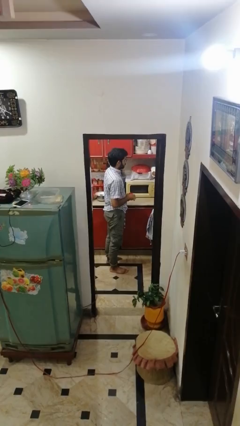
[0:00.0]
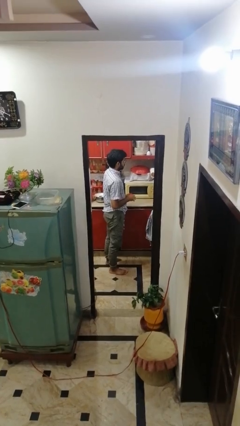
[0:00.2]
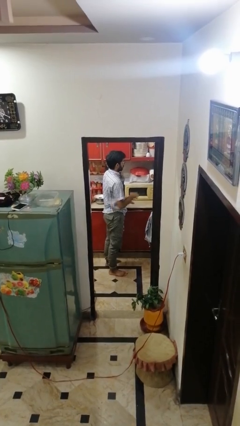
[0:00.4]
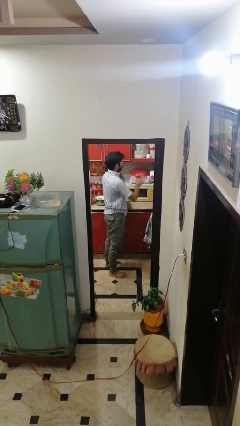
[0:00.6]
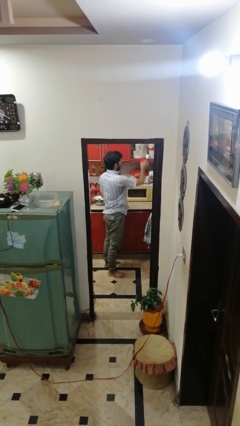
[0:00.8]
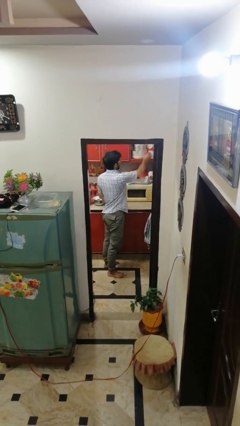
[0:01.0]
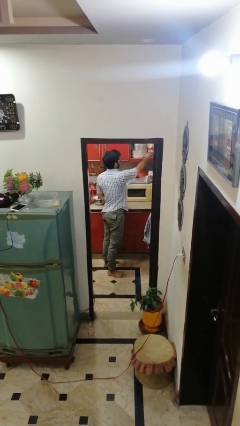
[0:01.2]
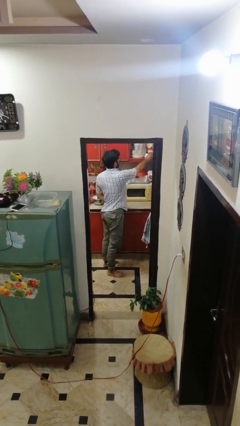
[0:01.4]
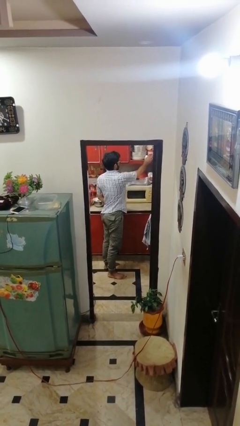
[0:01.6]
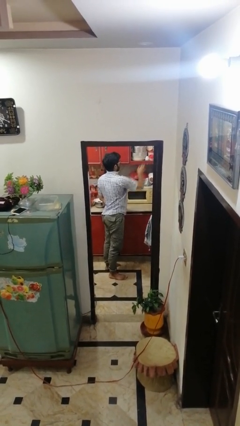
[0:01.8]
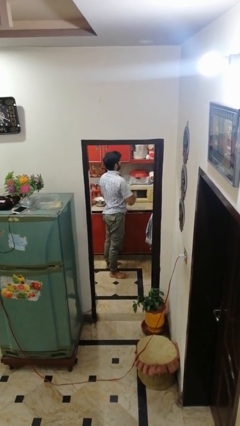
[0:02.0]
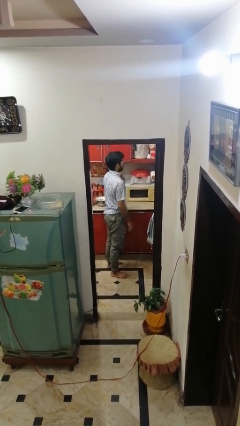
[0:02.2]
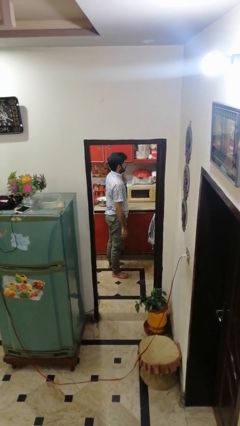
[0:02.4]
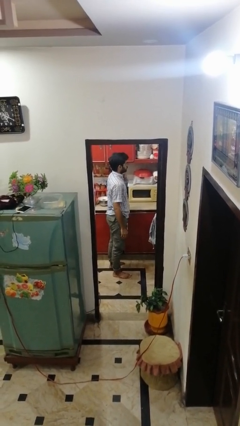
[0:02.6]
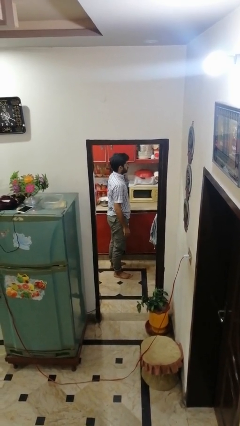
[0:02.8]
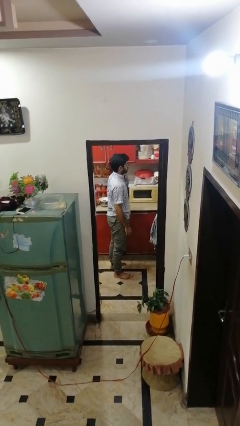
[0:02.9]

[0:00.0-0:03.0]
person puts down object into cabinet

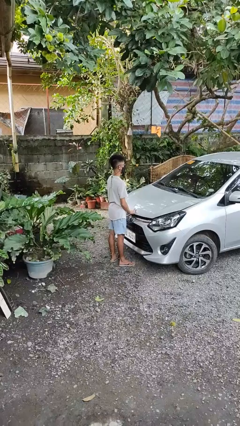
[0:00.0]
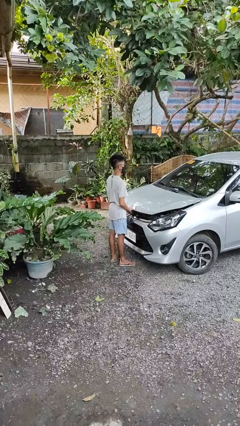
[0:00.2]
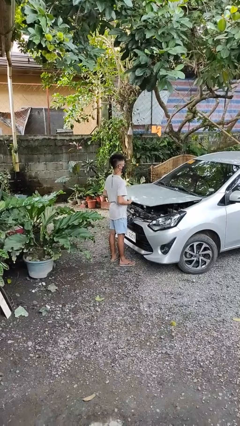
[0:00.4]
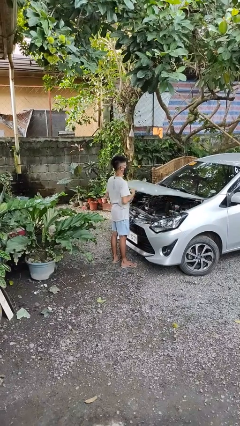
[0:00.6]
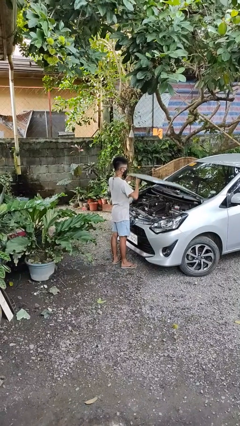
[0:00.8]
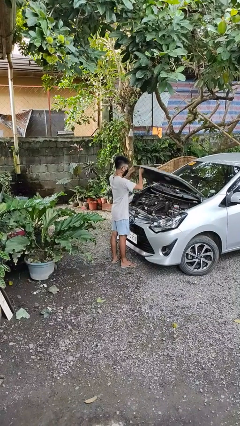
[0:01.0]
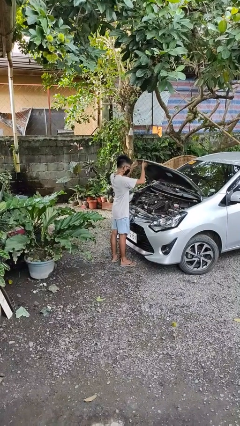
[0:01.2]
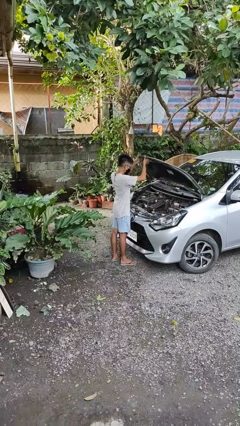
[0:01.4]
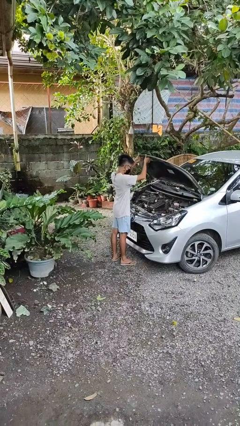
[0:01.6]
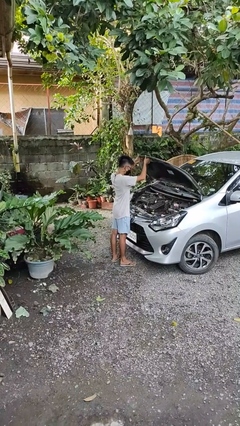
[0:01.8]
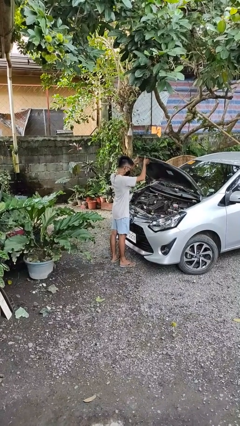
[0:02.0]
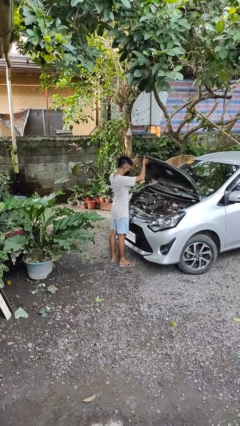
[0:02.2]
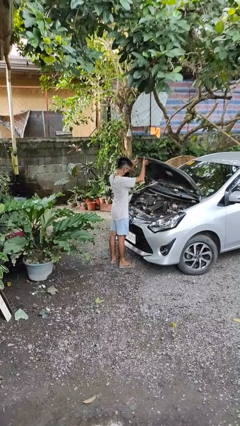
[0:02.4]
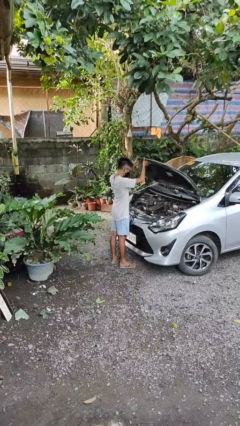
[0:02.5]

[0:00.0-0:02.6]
person opens car hood

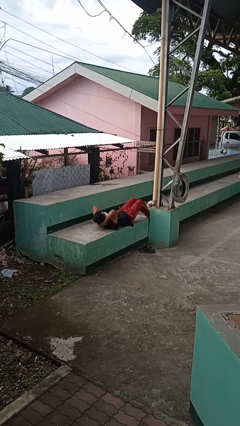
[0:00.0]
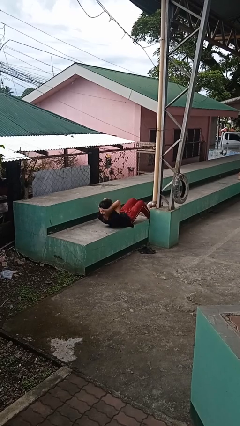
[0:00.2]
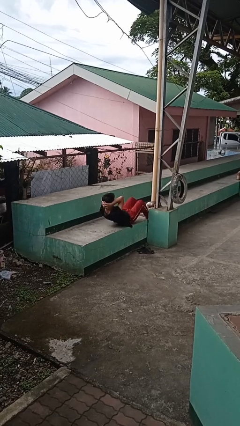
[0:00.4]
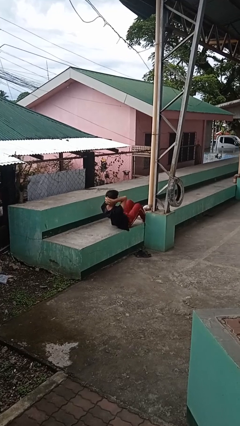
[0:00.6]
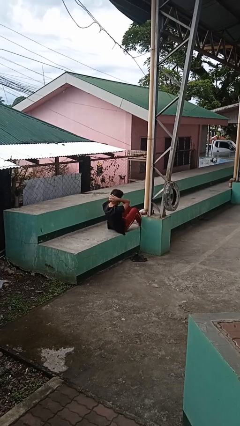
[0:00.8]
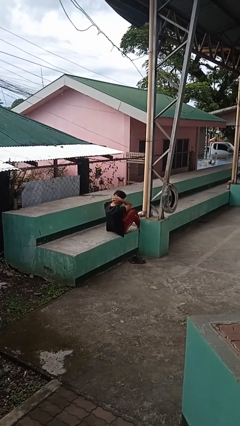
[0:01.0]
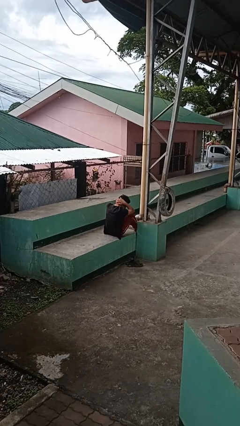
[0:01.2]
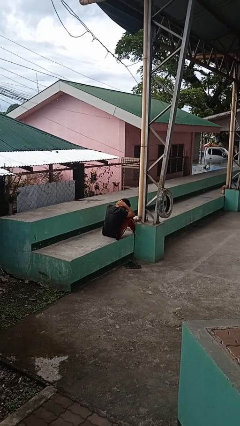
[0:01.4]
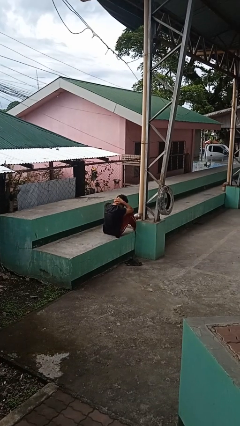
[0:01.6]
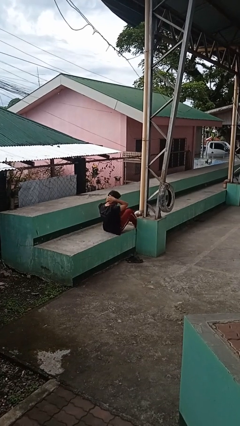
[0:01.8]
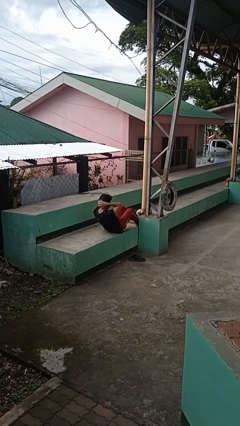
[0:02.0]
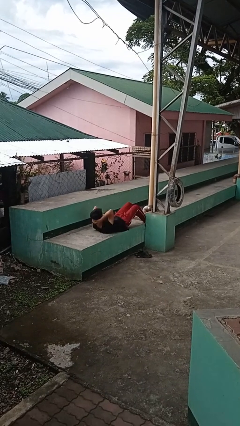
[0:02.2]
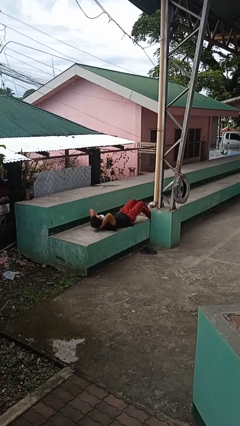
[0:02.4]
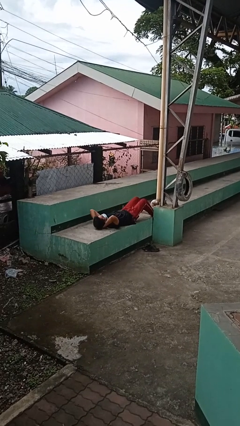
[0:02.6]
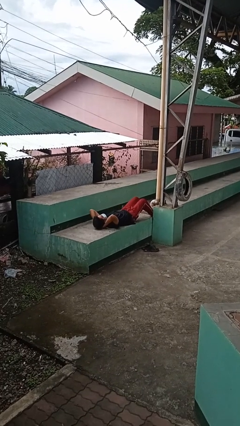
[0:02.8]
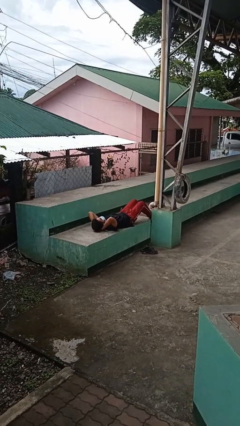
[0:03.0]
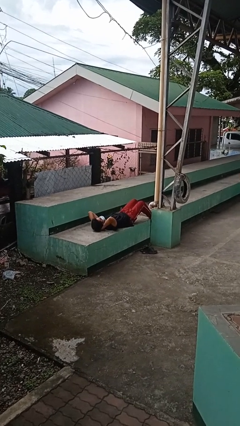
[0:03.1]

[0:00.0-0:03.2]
person exercises with situp

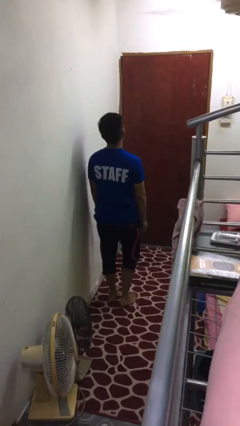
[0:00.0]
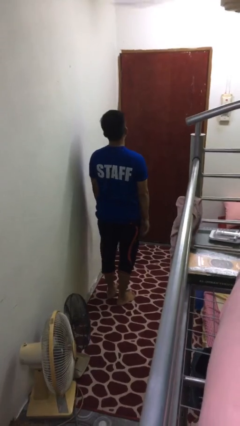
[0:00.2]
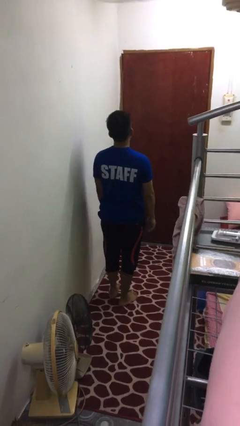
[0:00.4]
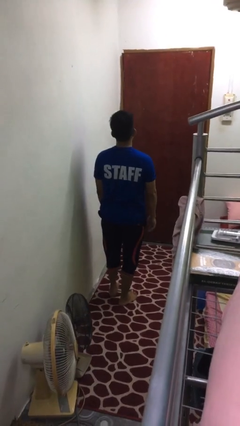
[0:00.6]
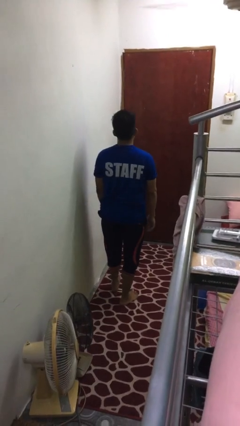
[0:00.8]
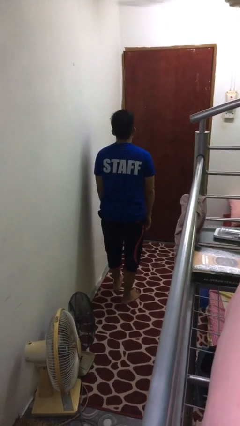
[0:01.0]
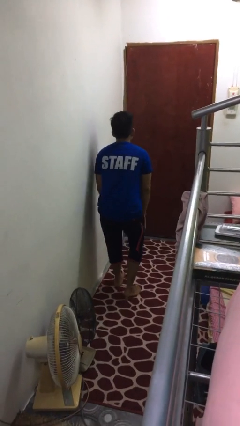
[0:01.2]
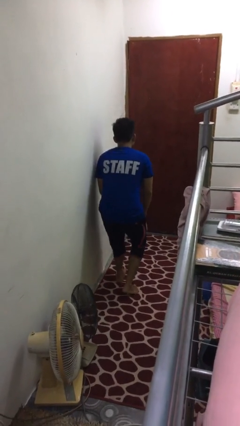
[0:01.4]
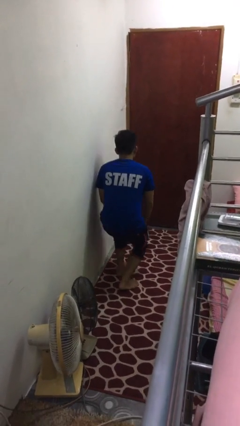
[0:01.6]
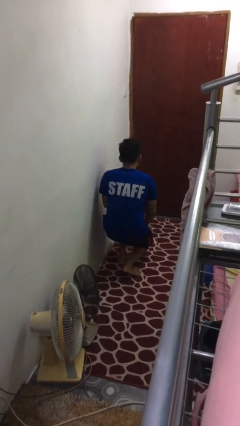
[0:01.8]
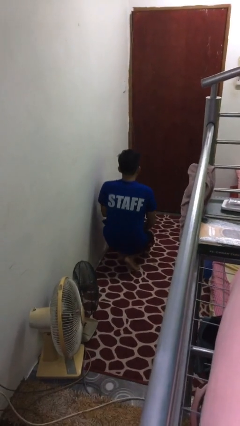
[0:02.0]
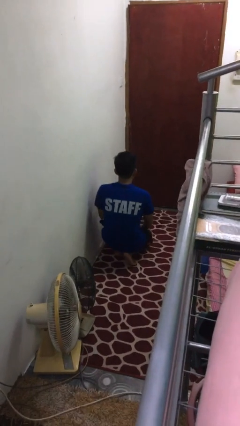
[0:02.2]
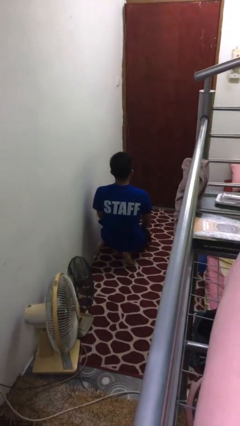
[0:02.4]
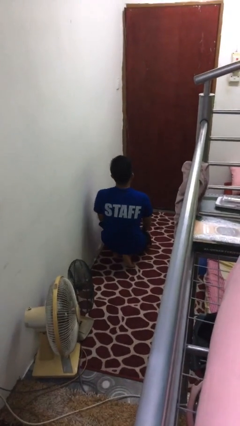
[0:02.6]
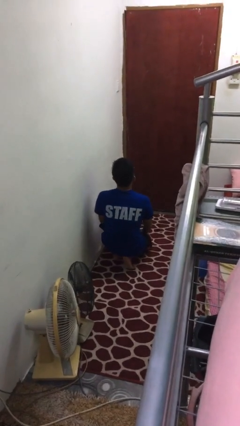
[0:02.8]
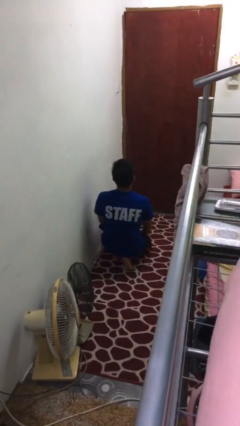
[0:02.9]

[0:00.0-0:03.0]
person kneels

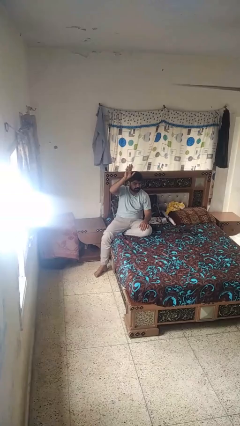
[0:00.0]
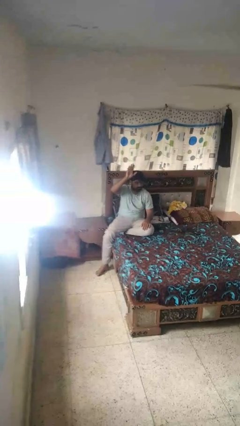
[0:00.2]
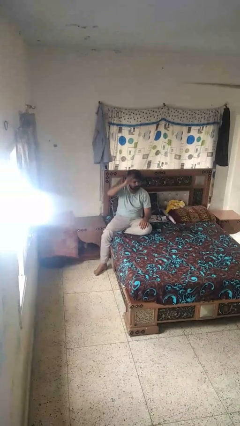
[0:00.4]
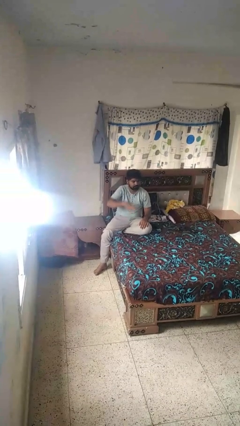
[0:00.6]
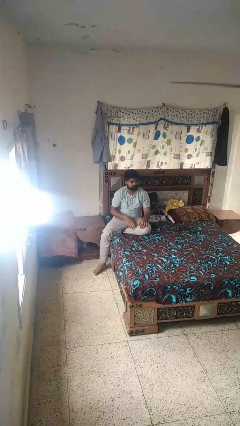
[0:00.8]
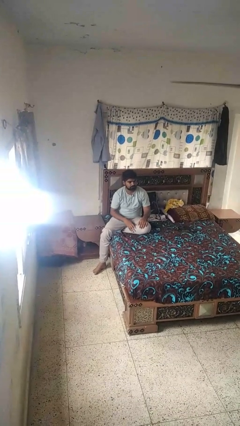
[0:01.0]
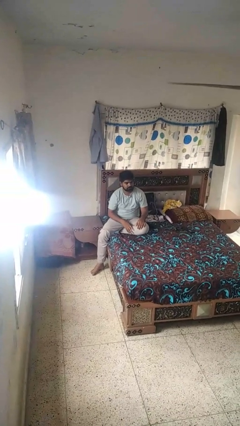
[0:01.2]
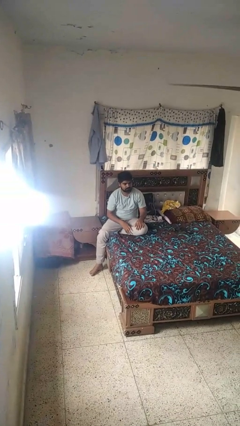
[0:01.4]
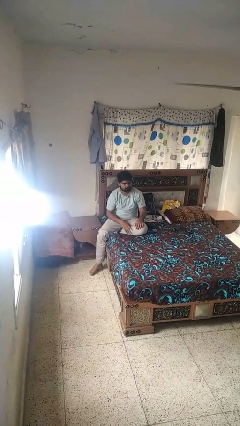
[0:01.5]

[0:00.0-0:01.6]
person gestures lower hand

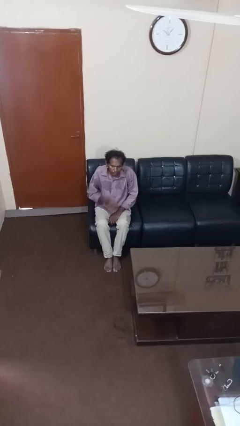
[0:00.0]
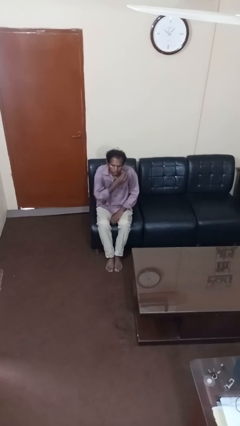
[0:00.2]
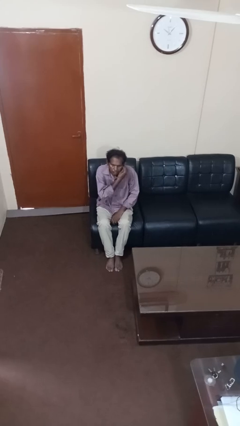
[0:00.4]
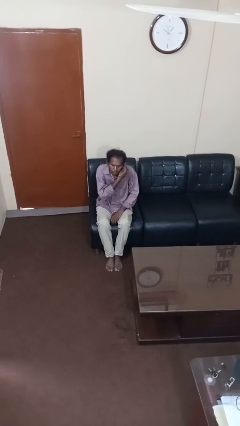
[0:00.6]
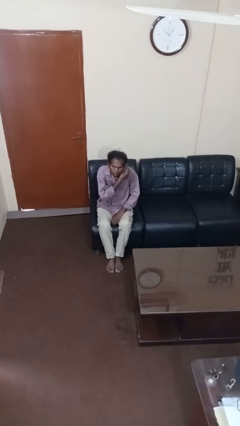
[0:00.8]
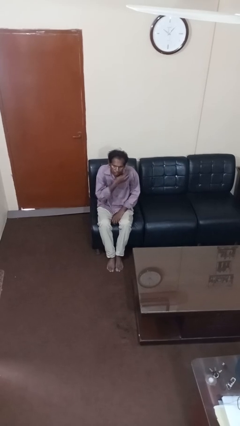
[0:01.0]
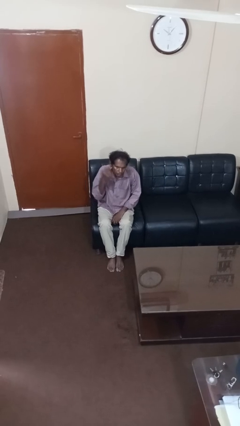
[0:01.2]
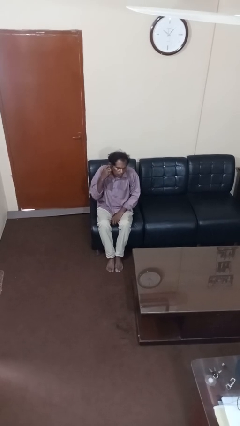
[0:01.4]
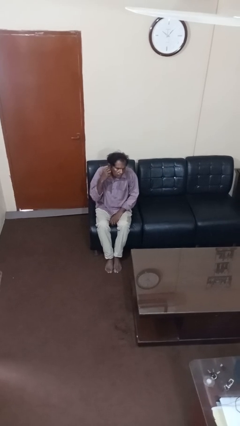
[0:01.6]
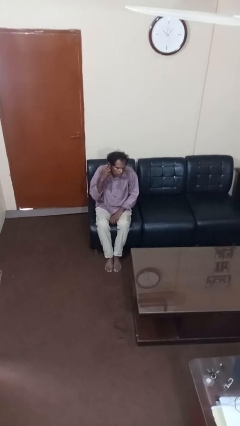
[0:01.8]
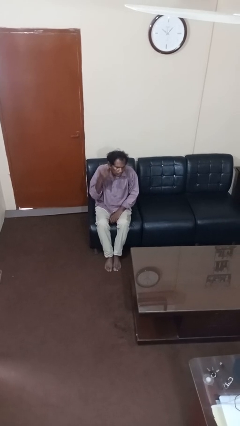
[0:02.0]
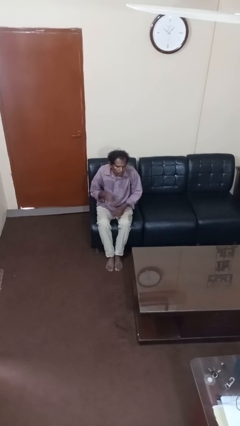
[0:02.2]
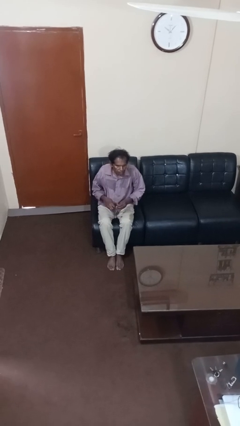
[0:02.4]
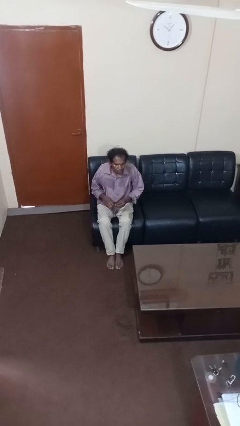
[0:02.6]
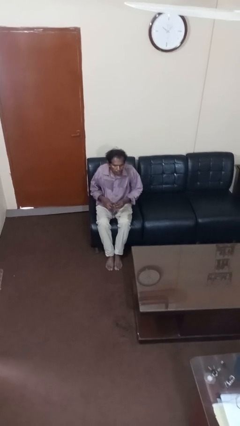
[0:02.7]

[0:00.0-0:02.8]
person takes off earrings

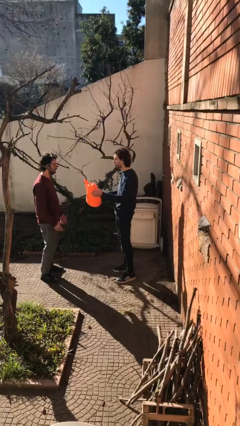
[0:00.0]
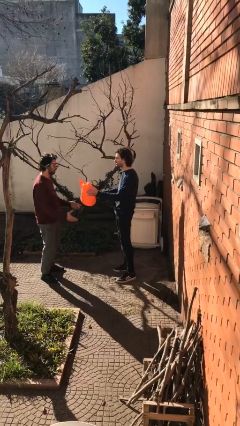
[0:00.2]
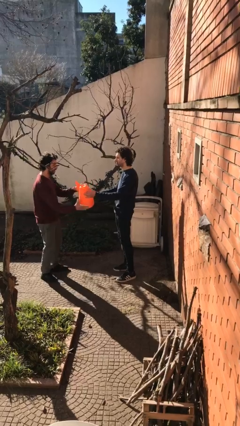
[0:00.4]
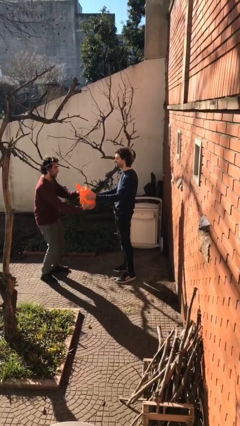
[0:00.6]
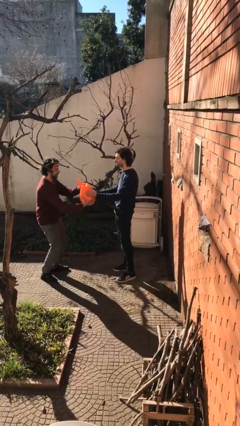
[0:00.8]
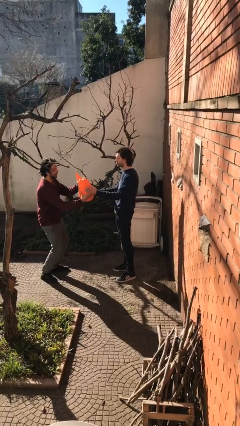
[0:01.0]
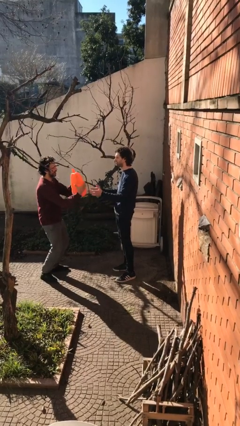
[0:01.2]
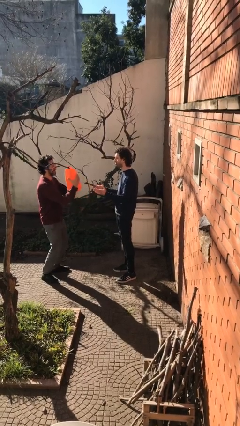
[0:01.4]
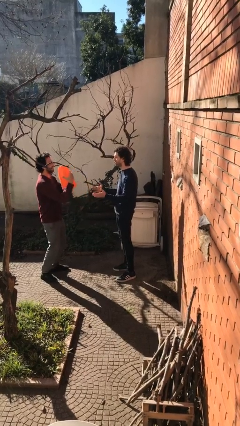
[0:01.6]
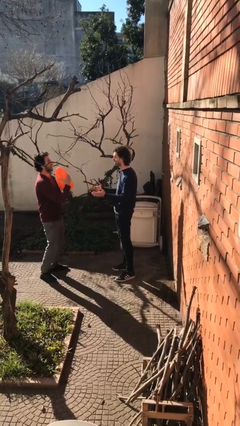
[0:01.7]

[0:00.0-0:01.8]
person transfers object to person
